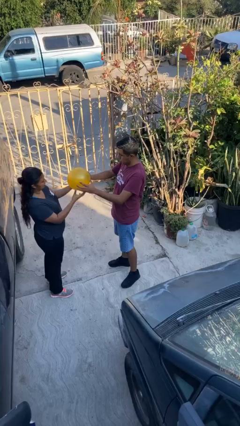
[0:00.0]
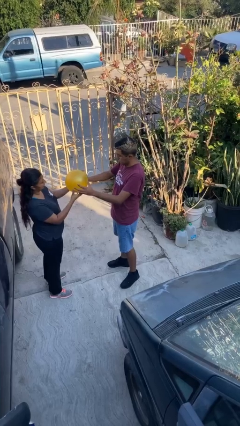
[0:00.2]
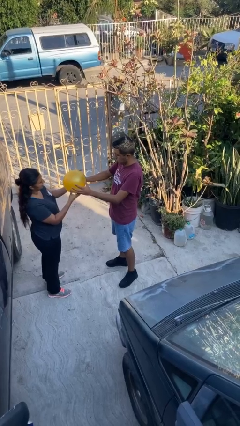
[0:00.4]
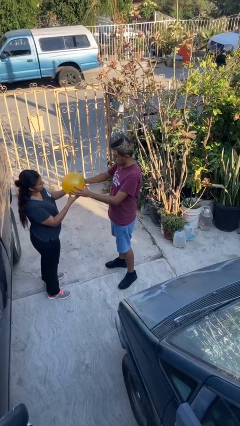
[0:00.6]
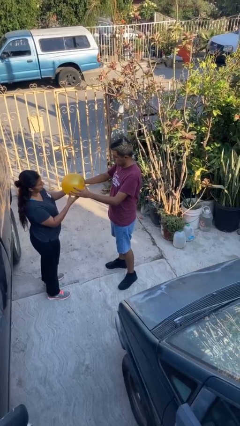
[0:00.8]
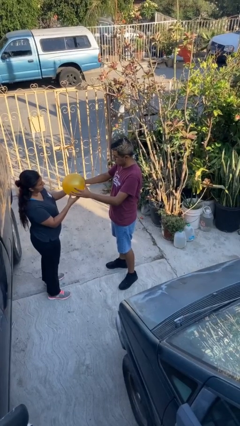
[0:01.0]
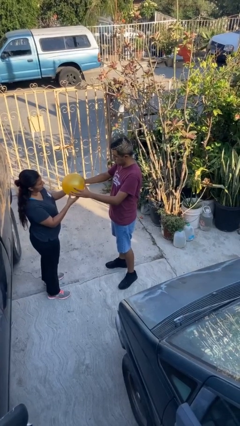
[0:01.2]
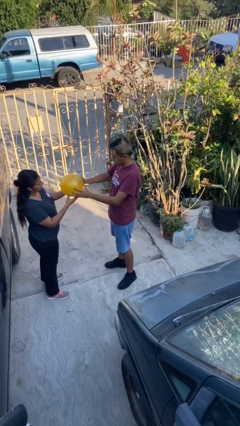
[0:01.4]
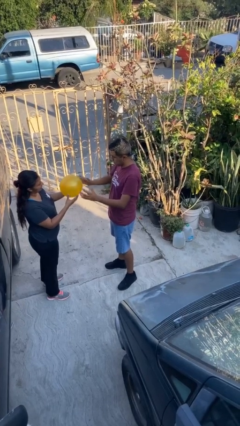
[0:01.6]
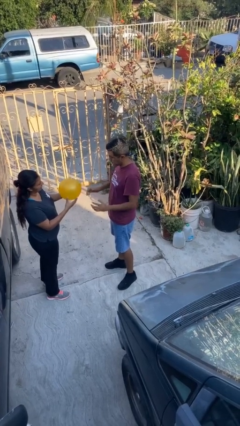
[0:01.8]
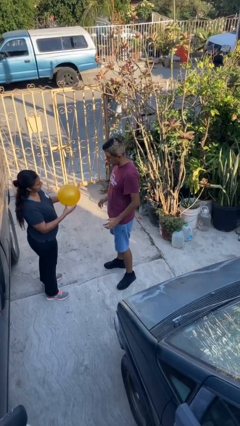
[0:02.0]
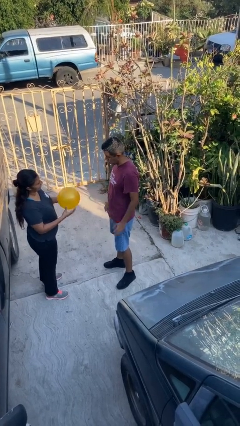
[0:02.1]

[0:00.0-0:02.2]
person transfers object to person

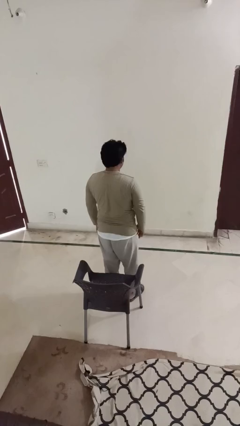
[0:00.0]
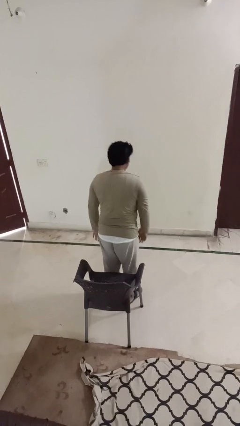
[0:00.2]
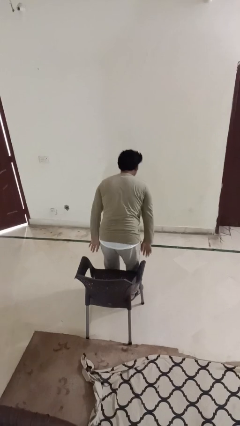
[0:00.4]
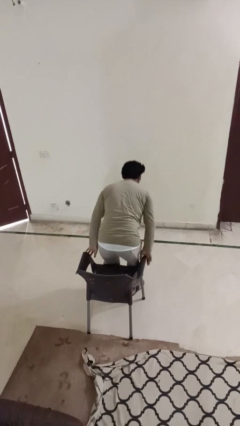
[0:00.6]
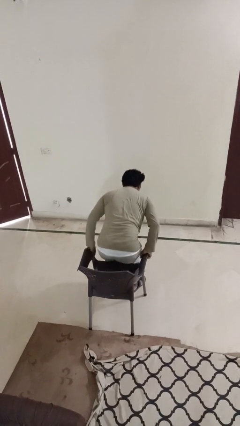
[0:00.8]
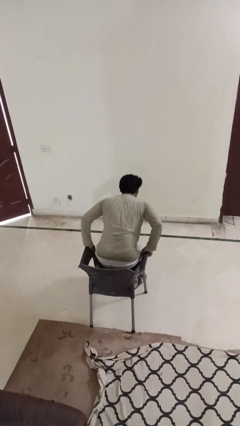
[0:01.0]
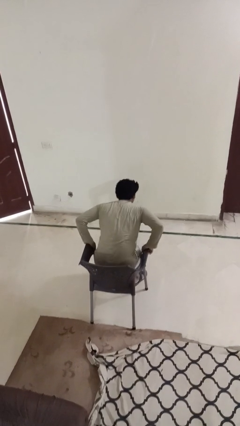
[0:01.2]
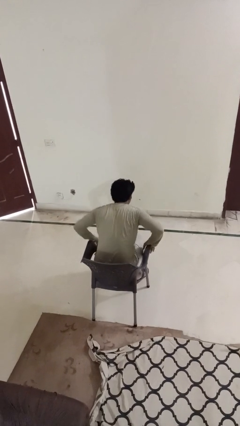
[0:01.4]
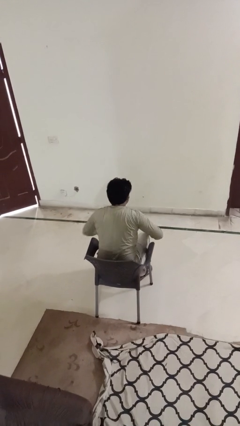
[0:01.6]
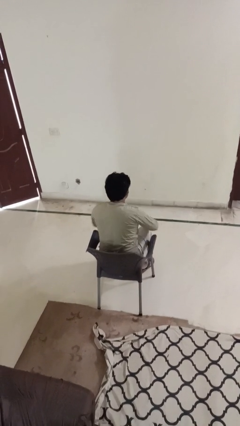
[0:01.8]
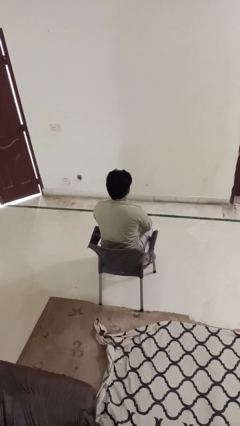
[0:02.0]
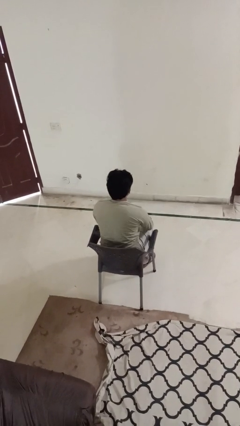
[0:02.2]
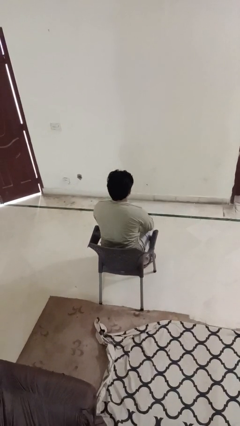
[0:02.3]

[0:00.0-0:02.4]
person sits down

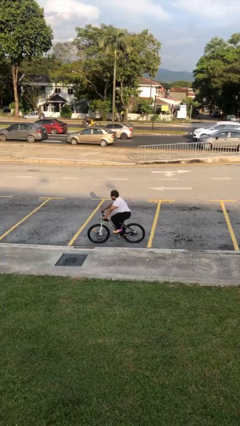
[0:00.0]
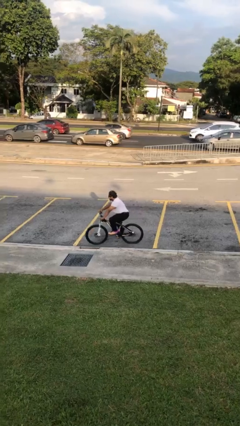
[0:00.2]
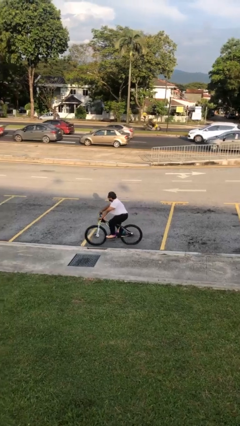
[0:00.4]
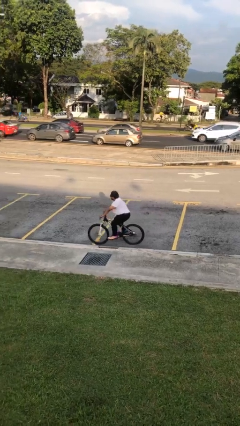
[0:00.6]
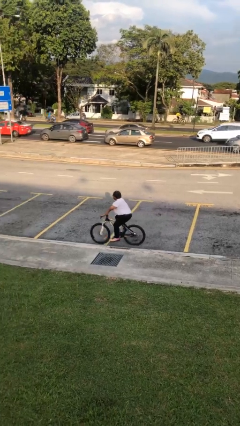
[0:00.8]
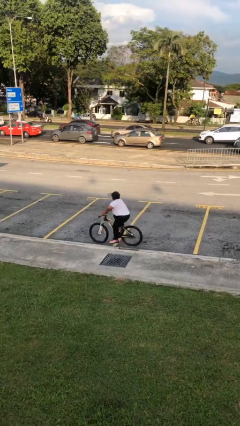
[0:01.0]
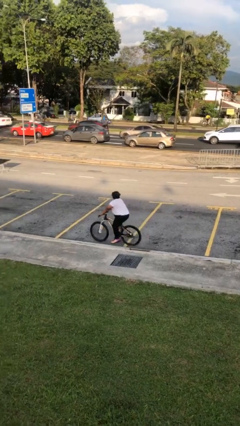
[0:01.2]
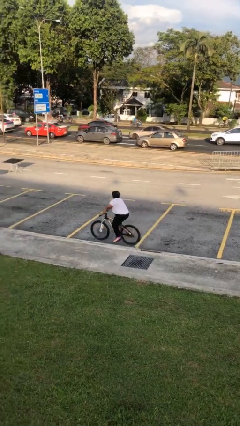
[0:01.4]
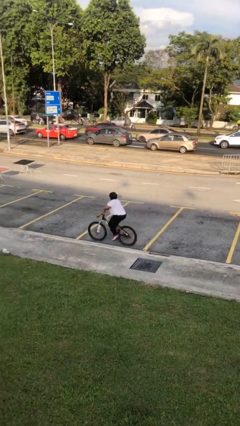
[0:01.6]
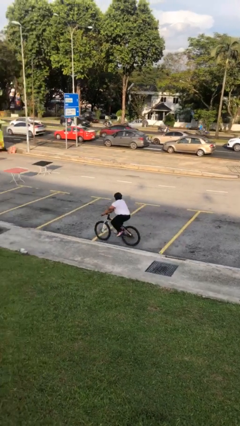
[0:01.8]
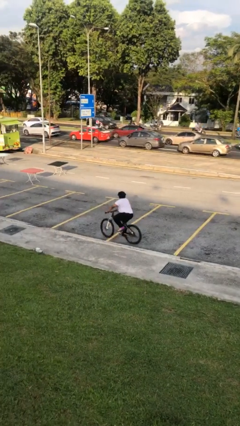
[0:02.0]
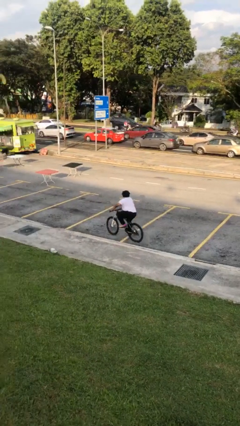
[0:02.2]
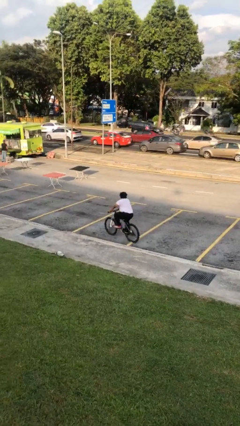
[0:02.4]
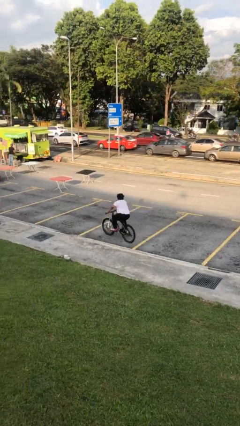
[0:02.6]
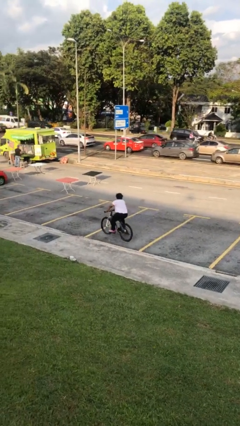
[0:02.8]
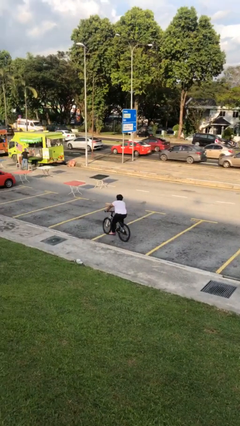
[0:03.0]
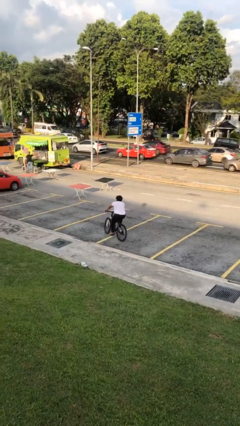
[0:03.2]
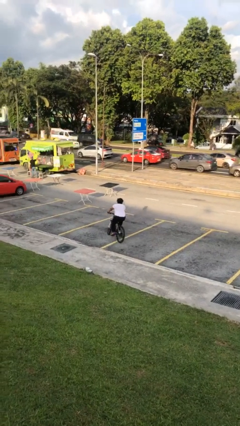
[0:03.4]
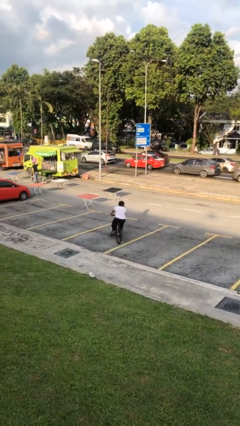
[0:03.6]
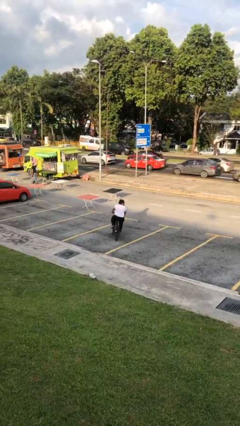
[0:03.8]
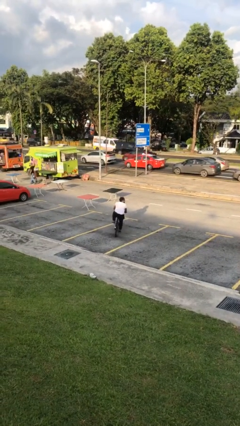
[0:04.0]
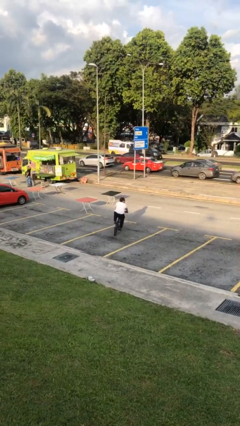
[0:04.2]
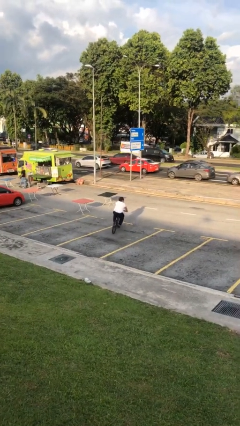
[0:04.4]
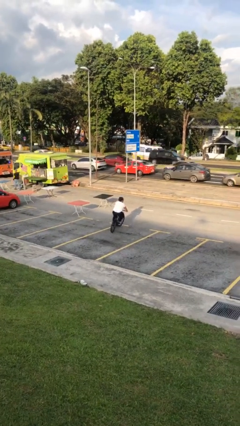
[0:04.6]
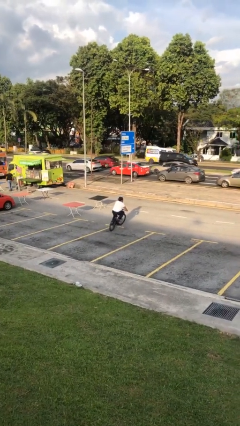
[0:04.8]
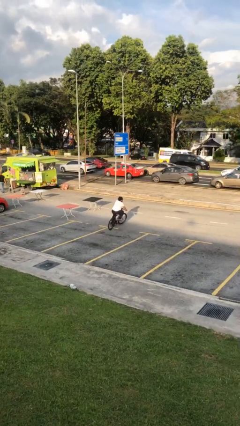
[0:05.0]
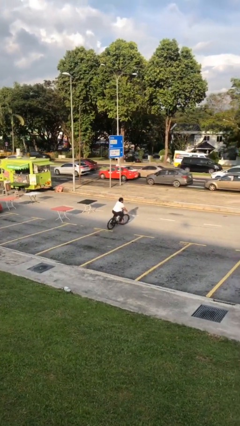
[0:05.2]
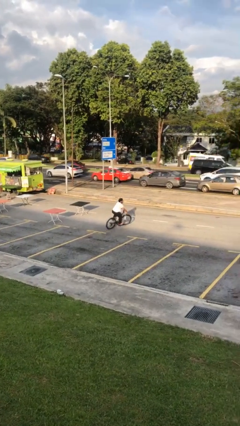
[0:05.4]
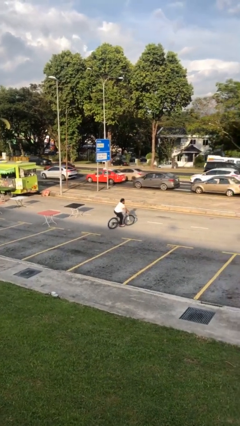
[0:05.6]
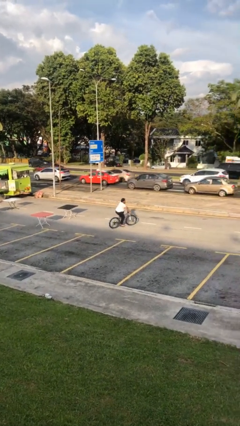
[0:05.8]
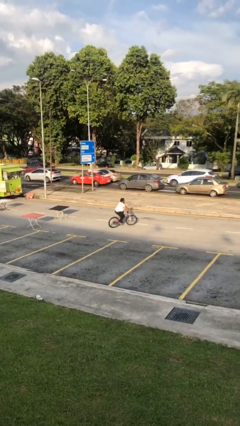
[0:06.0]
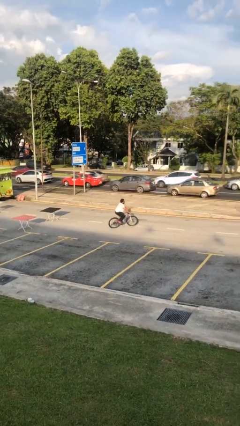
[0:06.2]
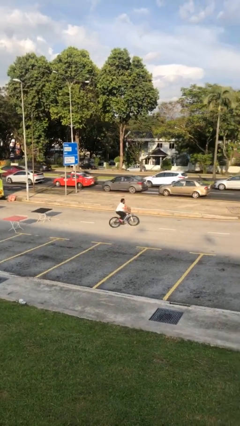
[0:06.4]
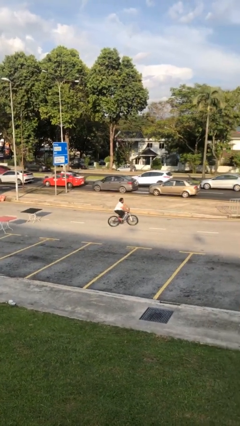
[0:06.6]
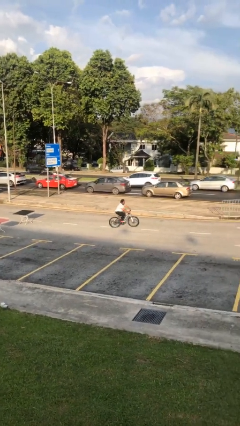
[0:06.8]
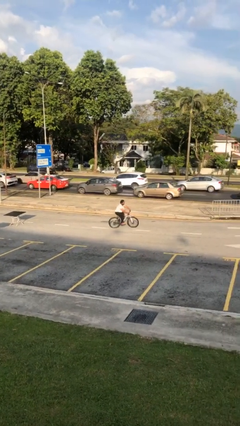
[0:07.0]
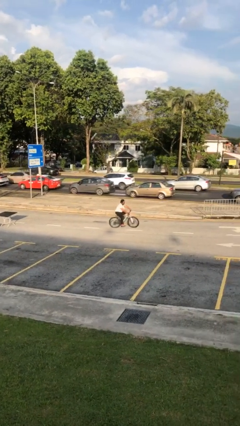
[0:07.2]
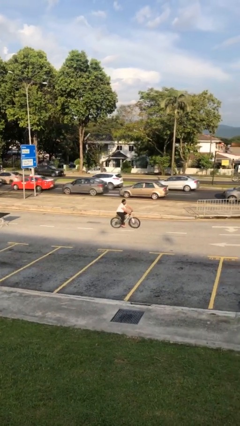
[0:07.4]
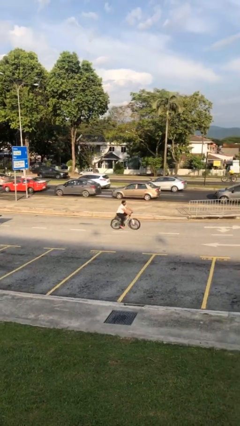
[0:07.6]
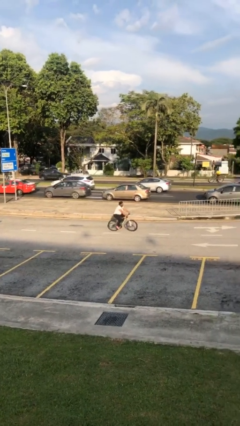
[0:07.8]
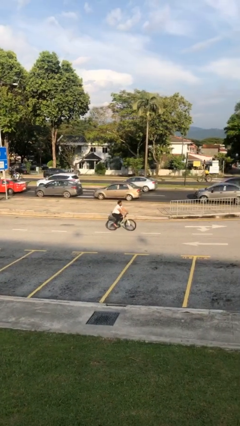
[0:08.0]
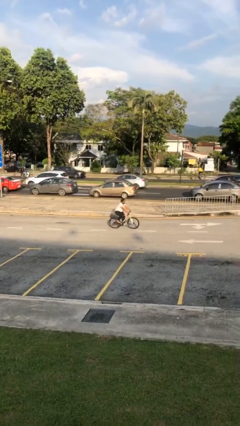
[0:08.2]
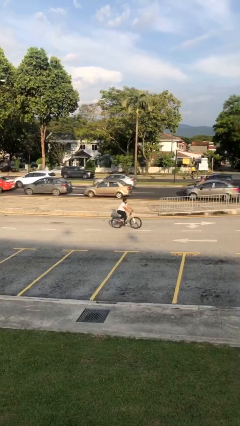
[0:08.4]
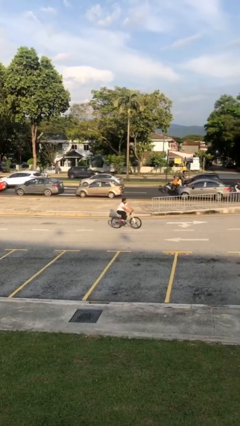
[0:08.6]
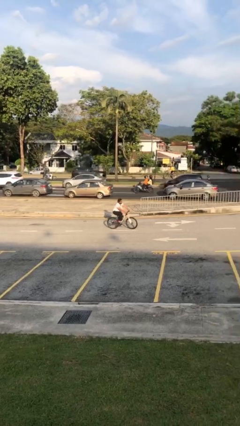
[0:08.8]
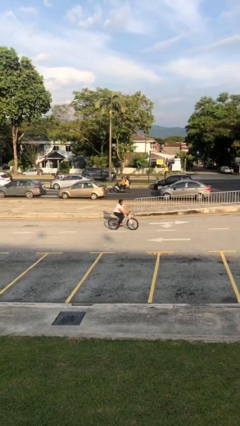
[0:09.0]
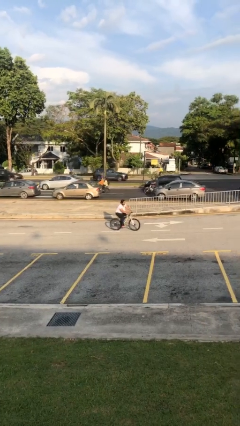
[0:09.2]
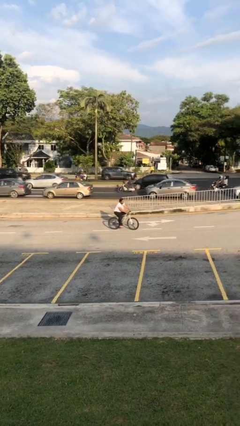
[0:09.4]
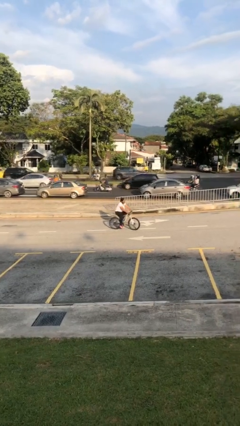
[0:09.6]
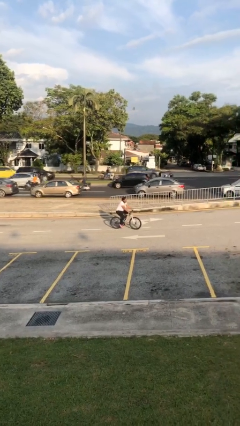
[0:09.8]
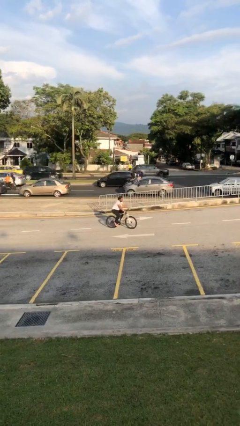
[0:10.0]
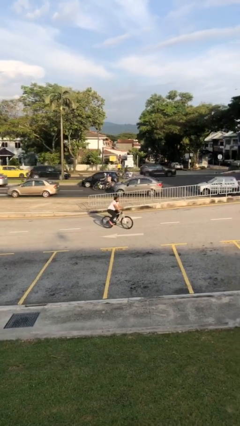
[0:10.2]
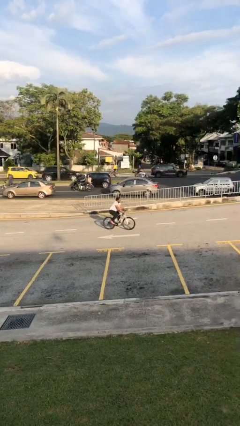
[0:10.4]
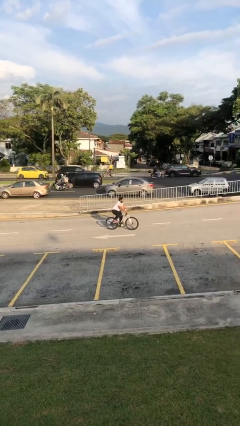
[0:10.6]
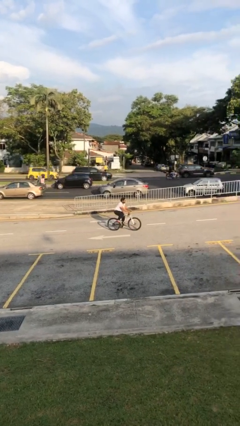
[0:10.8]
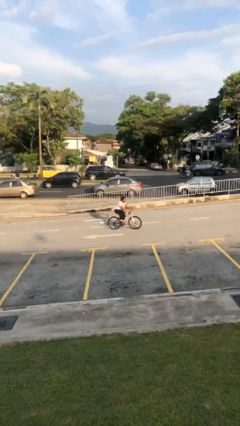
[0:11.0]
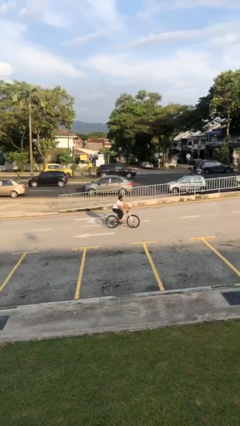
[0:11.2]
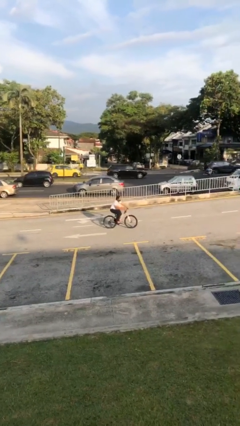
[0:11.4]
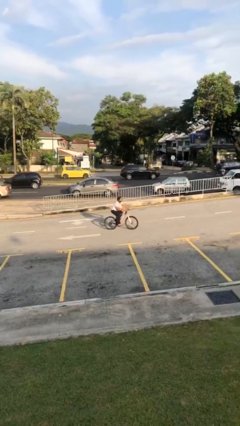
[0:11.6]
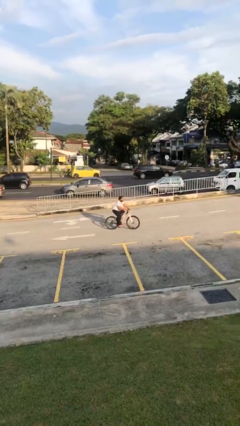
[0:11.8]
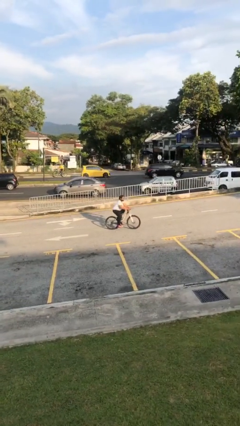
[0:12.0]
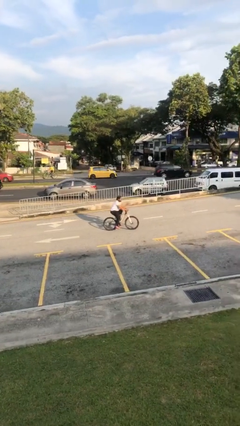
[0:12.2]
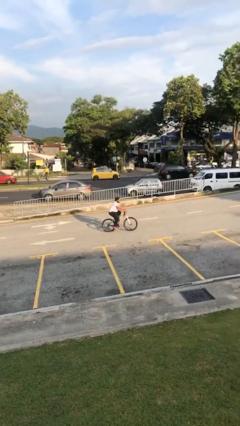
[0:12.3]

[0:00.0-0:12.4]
person rides bicycle

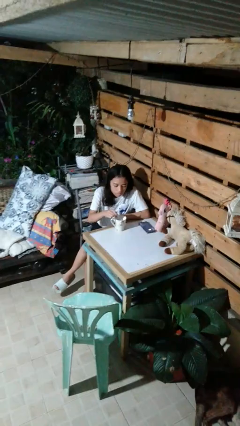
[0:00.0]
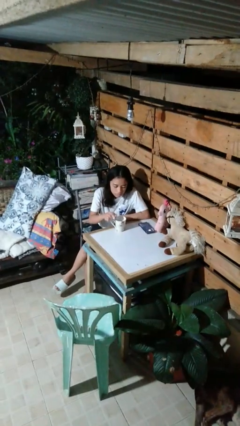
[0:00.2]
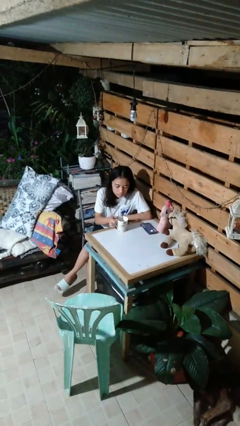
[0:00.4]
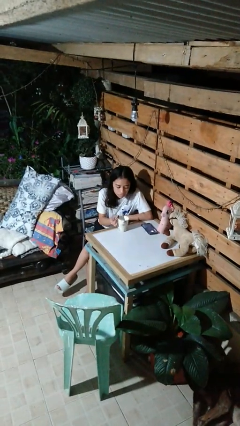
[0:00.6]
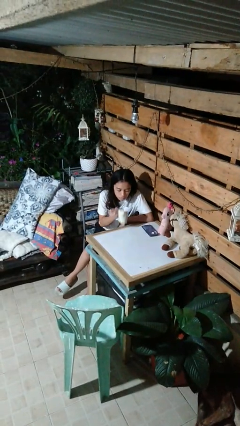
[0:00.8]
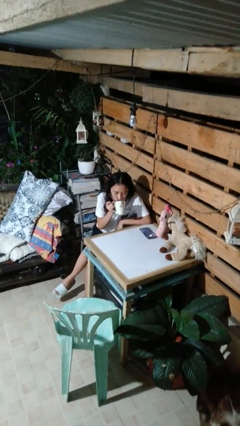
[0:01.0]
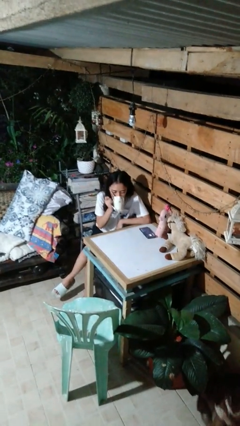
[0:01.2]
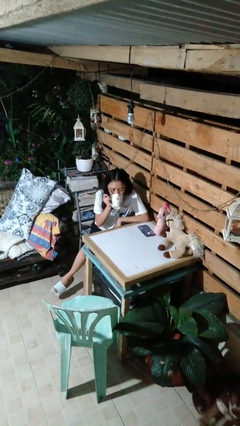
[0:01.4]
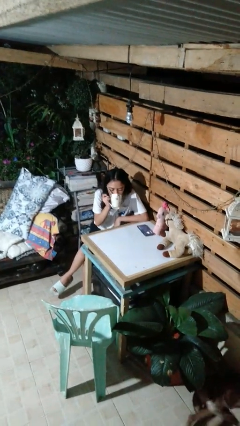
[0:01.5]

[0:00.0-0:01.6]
person drinks from mug
